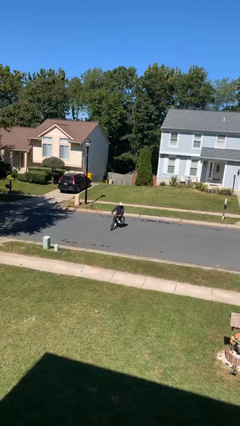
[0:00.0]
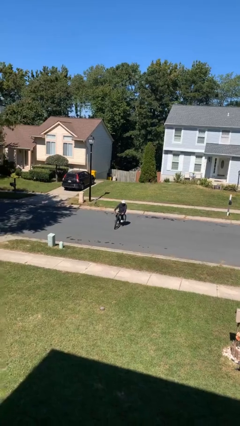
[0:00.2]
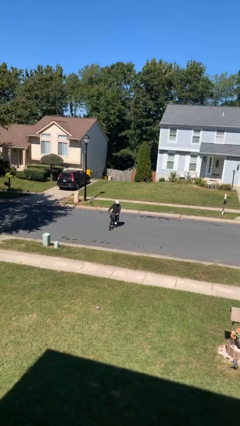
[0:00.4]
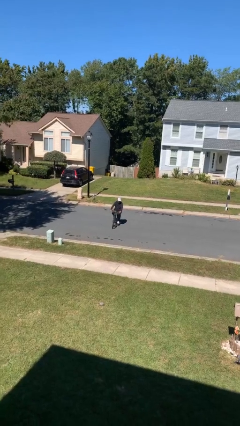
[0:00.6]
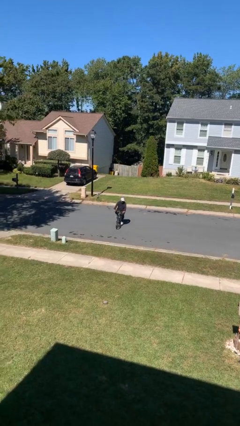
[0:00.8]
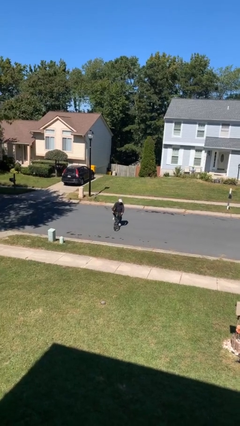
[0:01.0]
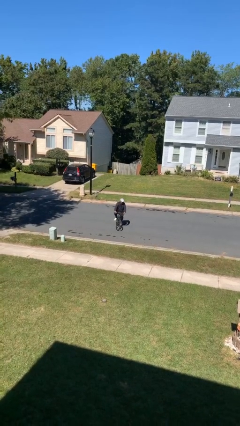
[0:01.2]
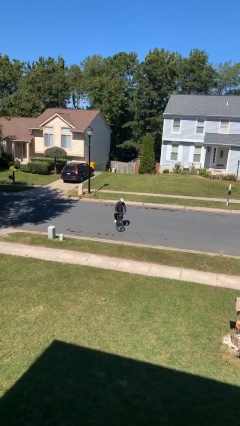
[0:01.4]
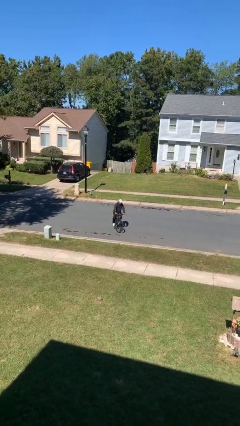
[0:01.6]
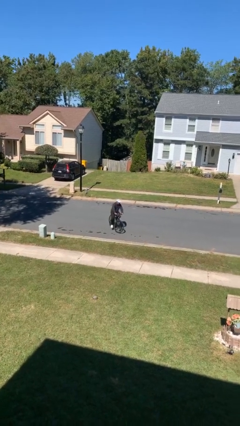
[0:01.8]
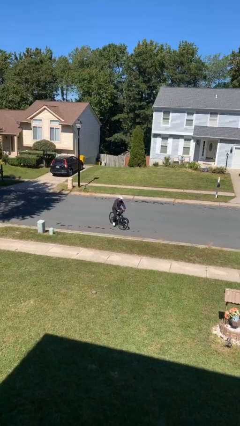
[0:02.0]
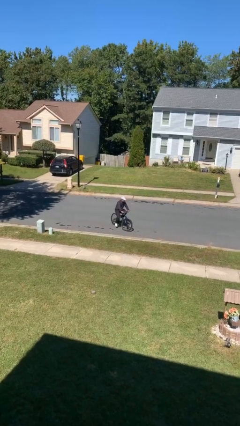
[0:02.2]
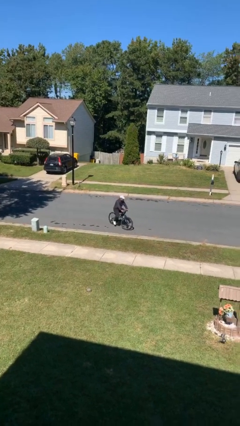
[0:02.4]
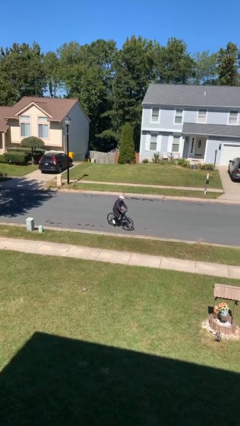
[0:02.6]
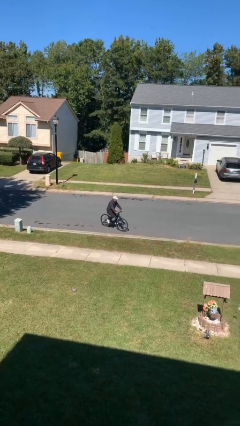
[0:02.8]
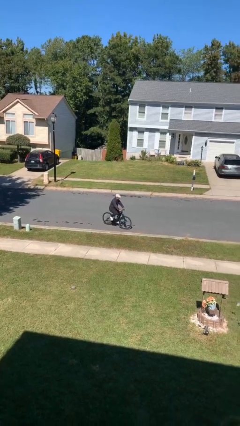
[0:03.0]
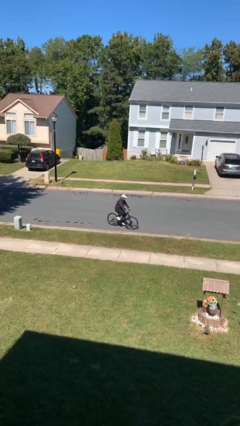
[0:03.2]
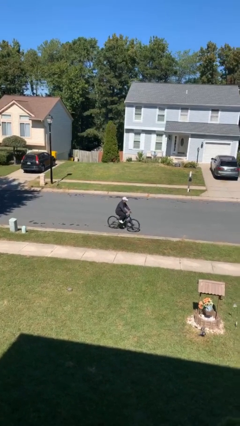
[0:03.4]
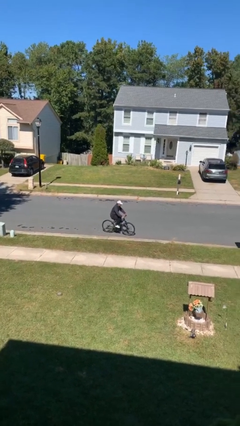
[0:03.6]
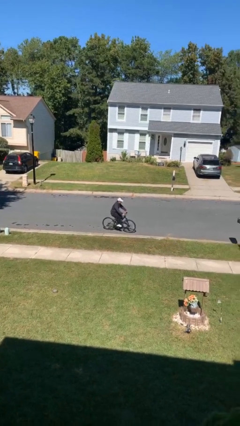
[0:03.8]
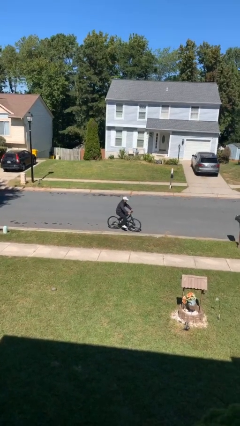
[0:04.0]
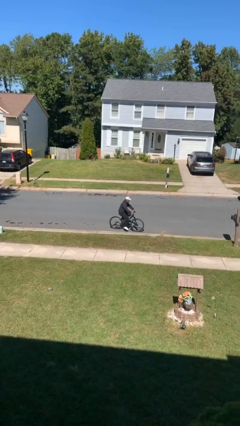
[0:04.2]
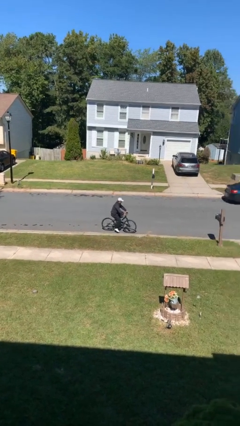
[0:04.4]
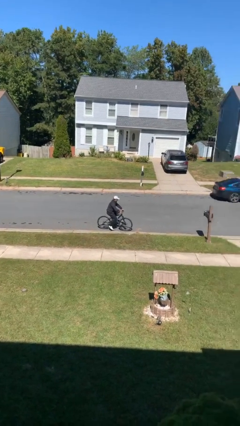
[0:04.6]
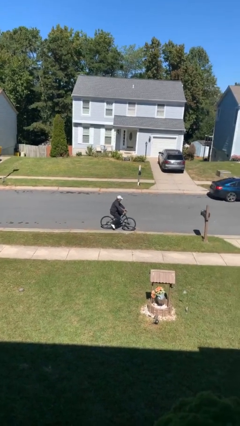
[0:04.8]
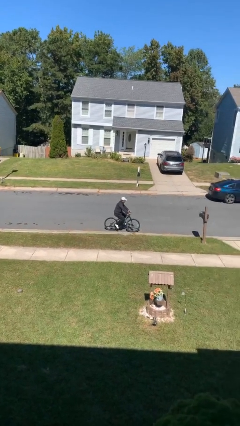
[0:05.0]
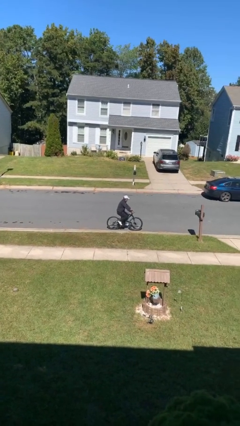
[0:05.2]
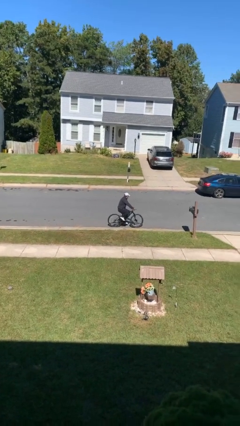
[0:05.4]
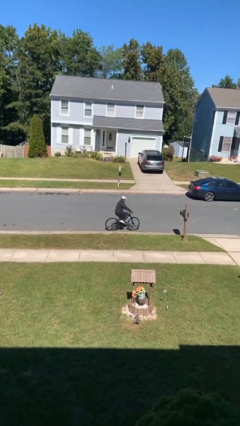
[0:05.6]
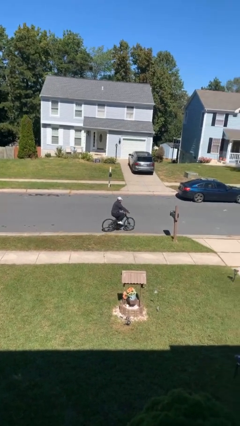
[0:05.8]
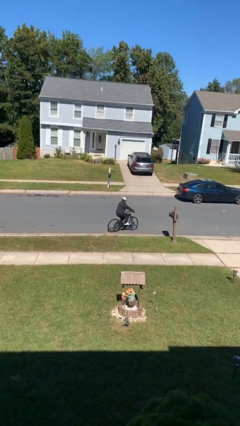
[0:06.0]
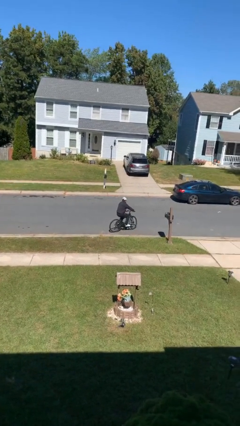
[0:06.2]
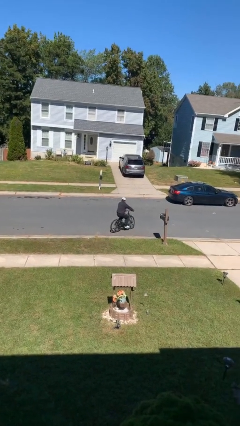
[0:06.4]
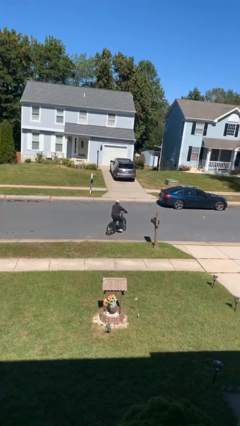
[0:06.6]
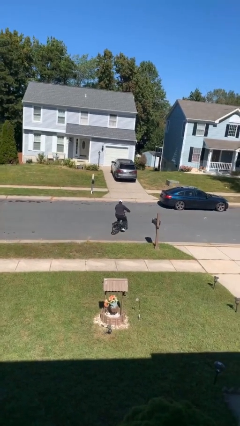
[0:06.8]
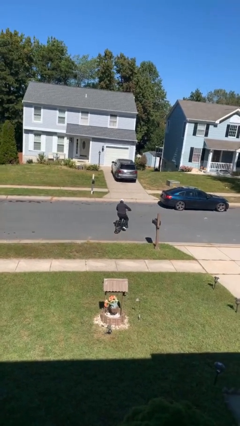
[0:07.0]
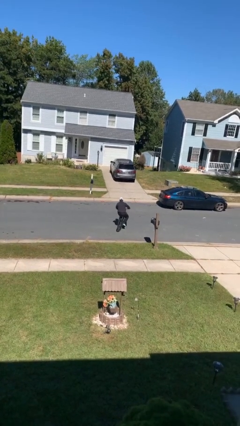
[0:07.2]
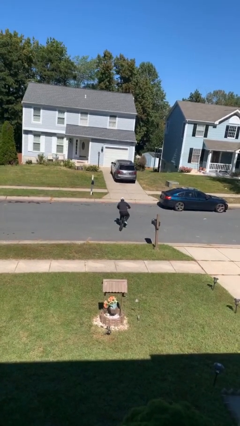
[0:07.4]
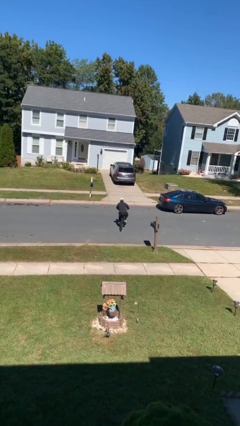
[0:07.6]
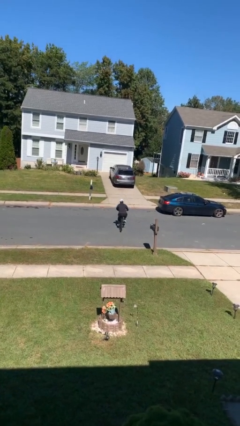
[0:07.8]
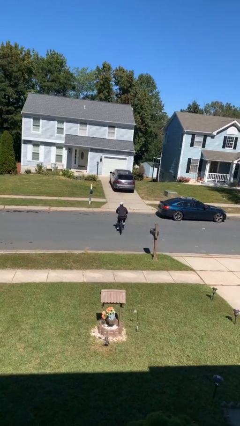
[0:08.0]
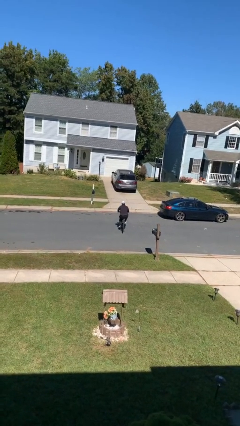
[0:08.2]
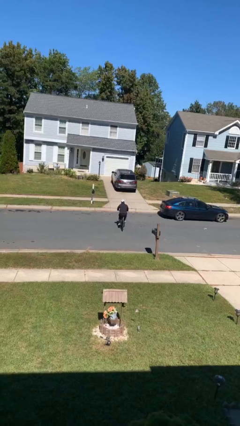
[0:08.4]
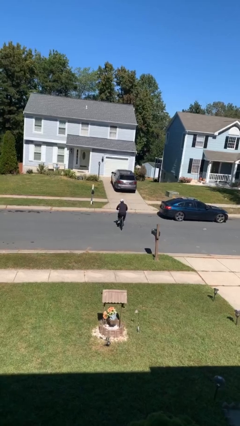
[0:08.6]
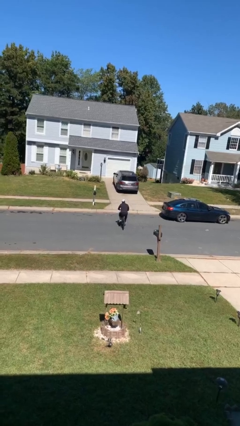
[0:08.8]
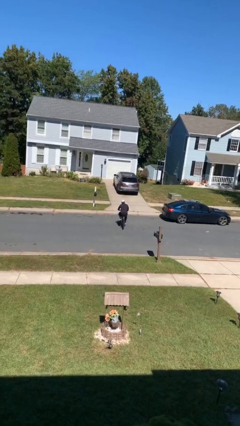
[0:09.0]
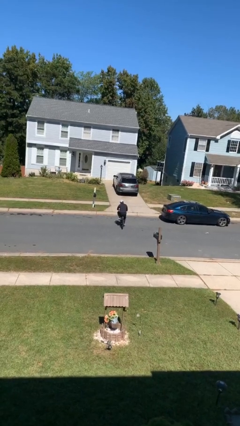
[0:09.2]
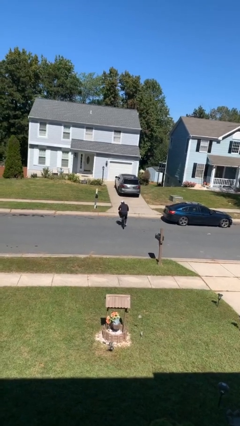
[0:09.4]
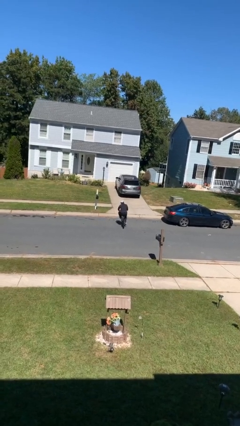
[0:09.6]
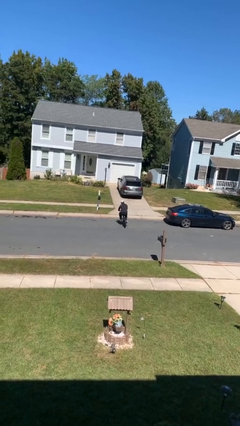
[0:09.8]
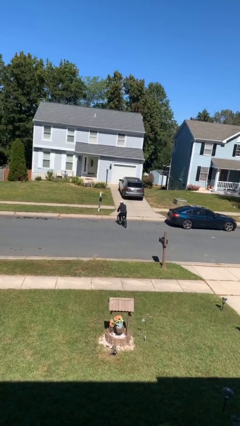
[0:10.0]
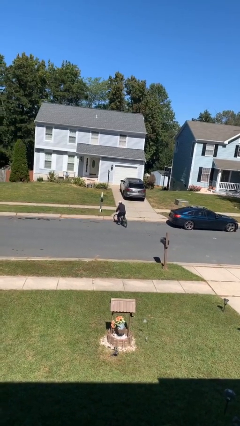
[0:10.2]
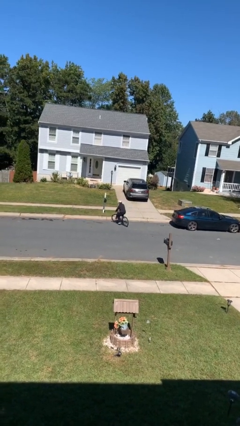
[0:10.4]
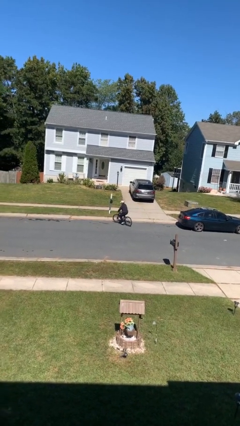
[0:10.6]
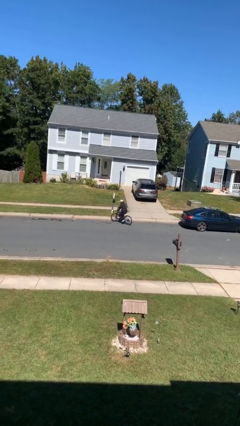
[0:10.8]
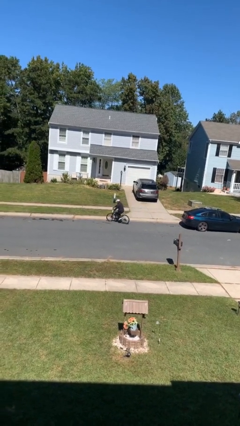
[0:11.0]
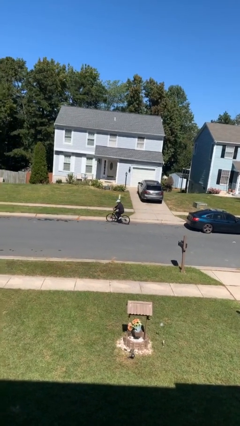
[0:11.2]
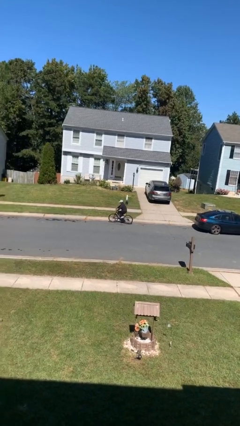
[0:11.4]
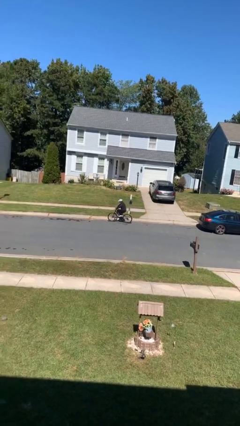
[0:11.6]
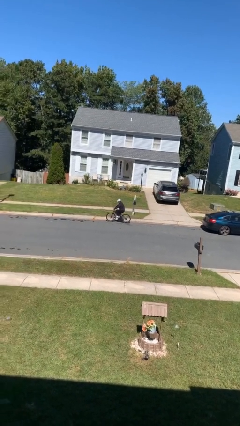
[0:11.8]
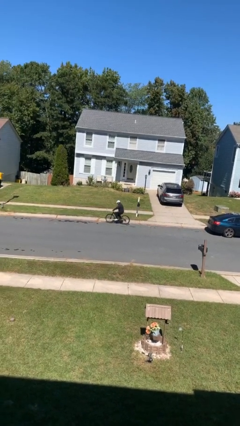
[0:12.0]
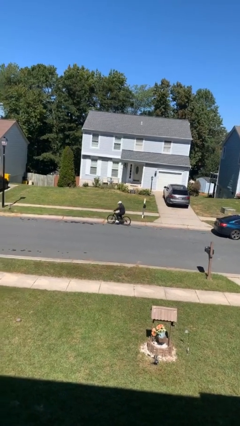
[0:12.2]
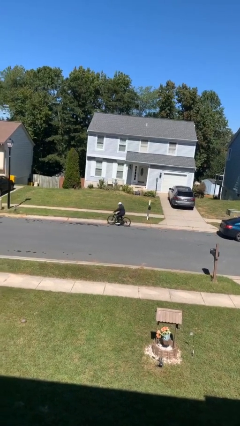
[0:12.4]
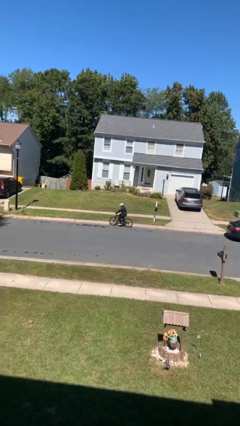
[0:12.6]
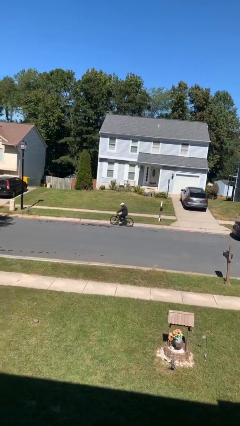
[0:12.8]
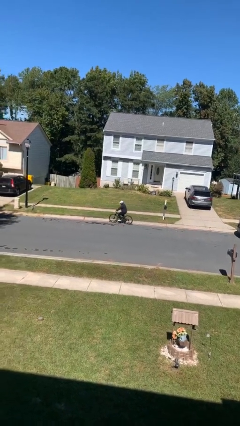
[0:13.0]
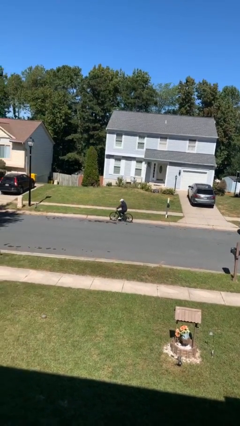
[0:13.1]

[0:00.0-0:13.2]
person rides bicycle

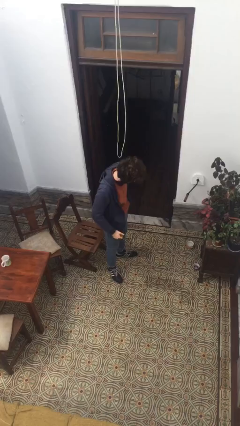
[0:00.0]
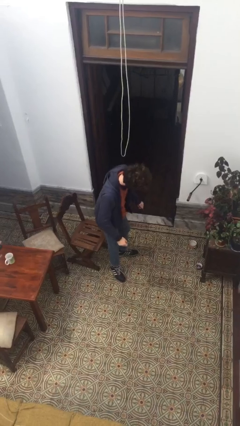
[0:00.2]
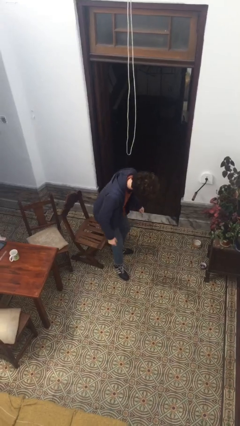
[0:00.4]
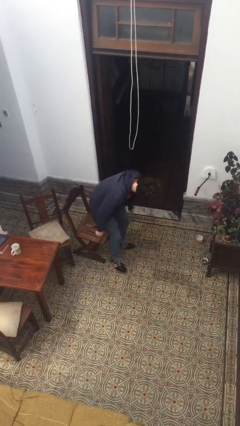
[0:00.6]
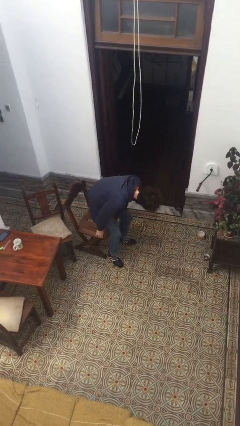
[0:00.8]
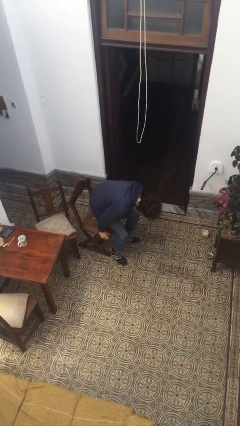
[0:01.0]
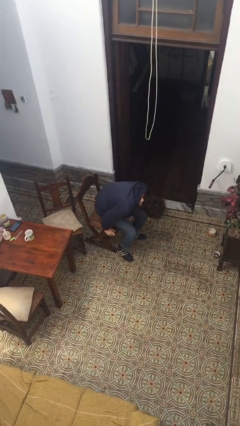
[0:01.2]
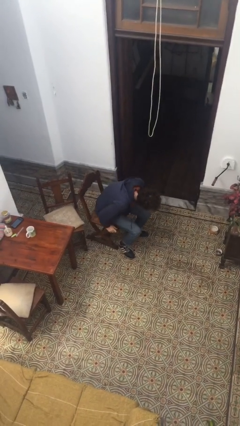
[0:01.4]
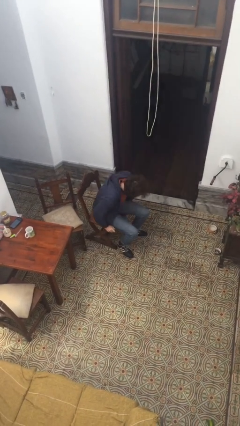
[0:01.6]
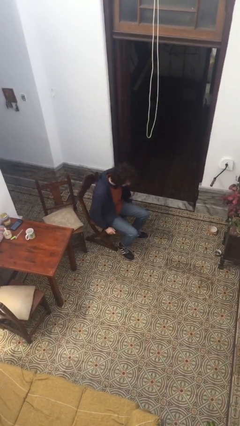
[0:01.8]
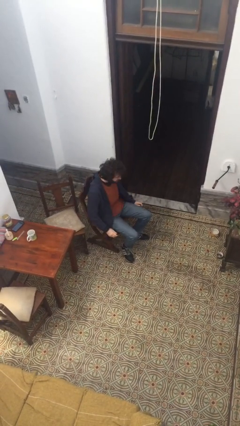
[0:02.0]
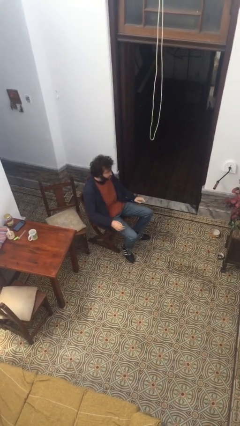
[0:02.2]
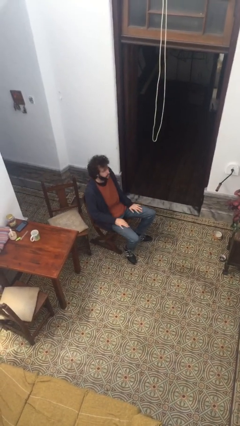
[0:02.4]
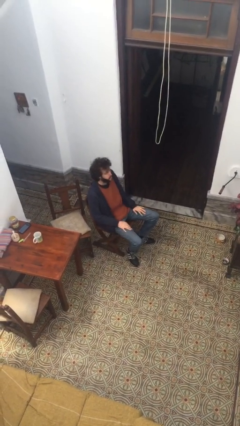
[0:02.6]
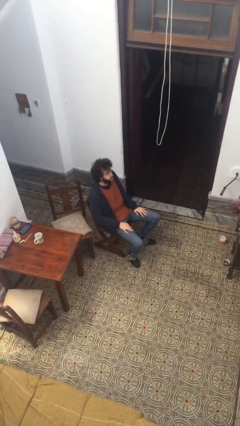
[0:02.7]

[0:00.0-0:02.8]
person sits down

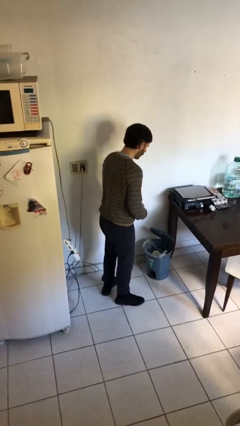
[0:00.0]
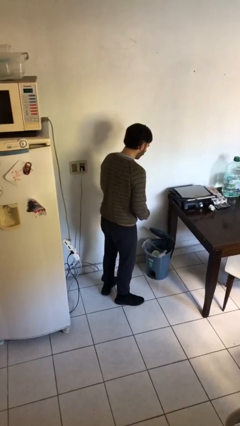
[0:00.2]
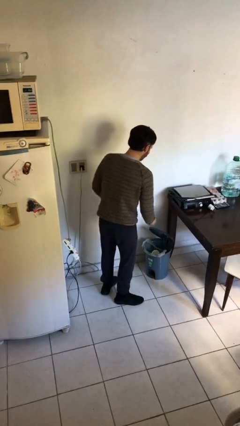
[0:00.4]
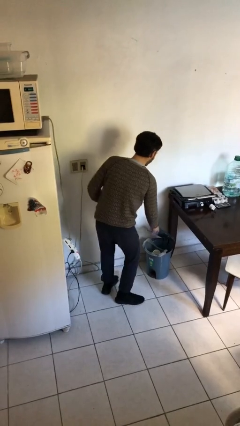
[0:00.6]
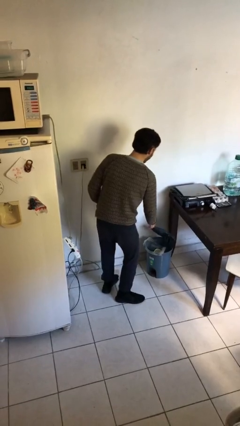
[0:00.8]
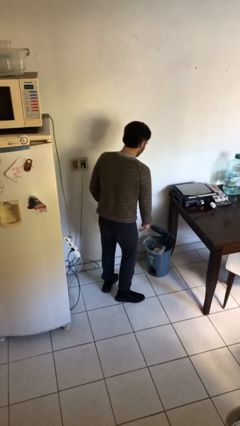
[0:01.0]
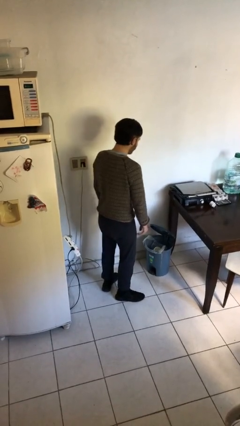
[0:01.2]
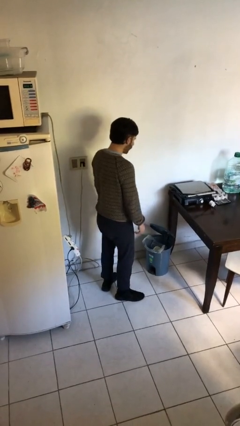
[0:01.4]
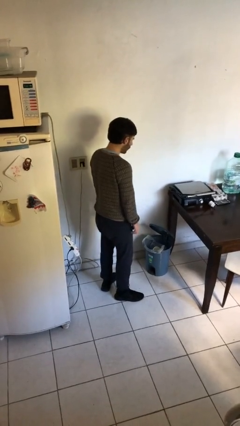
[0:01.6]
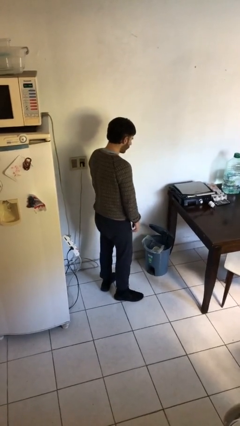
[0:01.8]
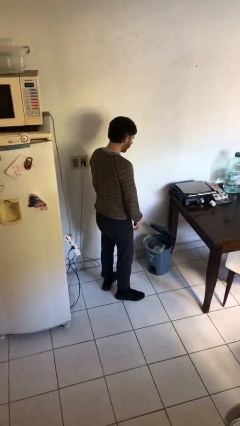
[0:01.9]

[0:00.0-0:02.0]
person discards trash
